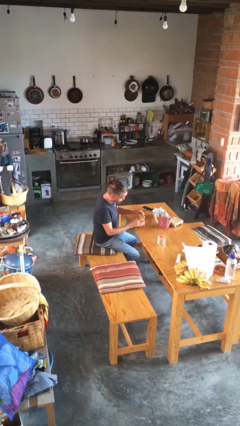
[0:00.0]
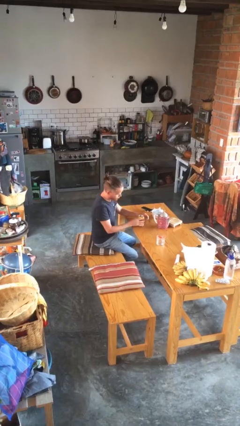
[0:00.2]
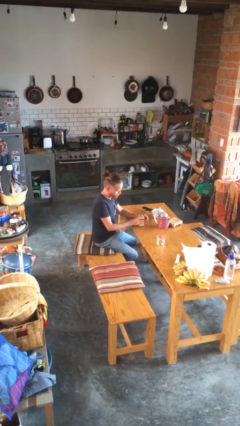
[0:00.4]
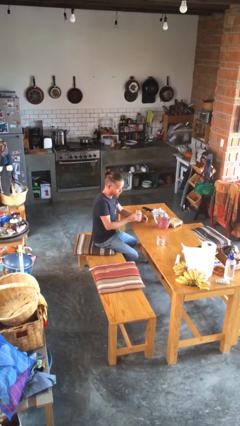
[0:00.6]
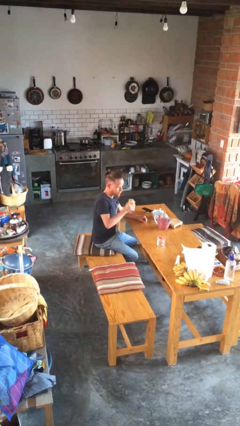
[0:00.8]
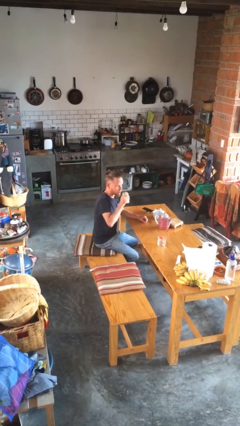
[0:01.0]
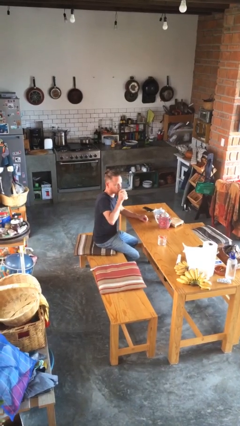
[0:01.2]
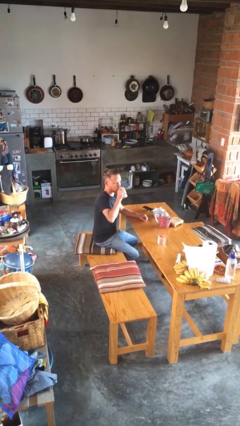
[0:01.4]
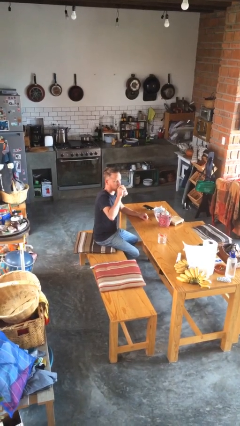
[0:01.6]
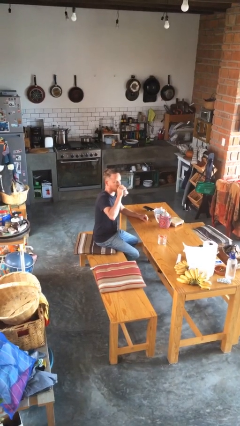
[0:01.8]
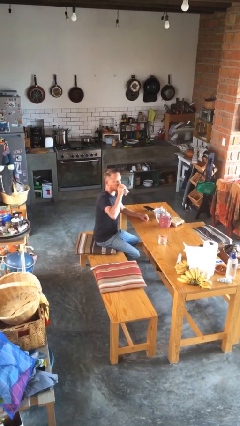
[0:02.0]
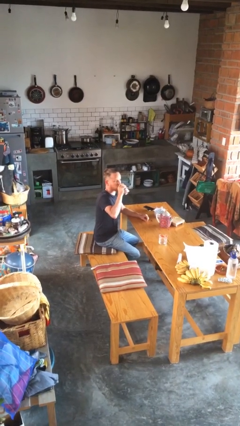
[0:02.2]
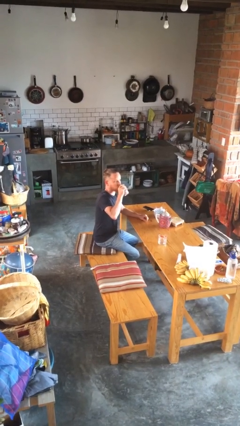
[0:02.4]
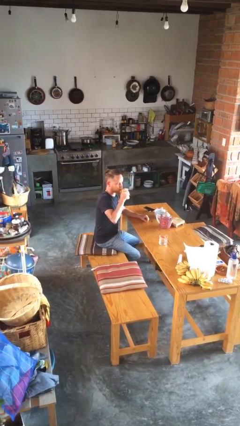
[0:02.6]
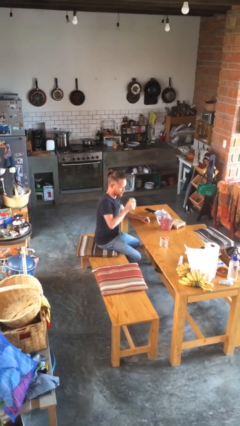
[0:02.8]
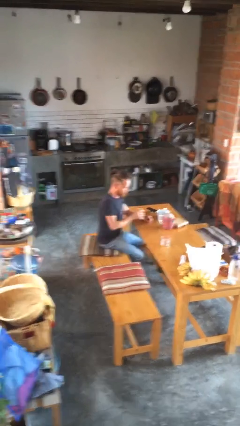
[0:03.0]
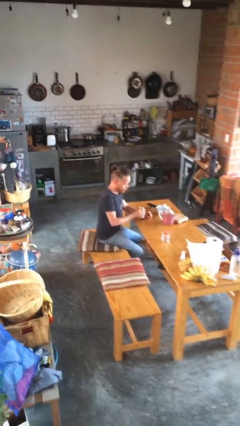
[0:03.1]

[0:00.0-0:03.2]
person drinks from beverage can

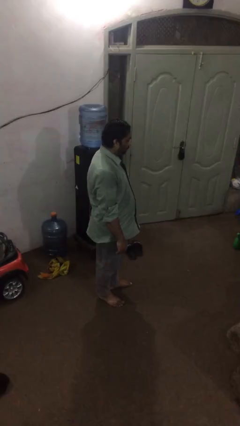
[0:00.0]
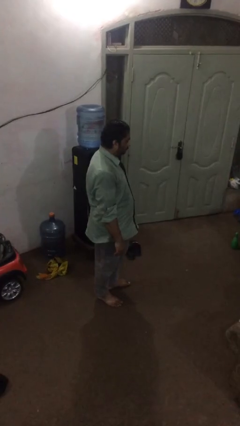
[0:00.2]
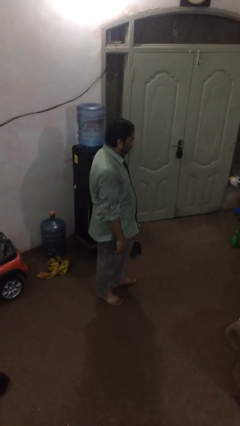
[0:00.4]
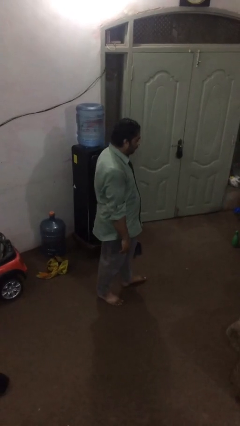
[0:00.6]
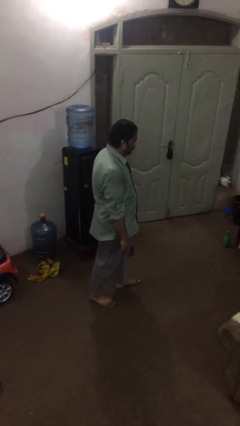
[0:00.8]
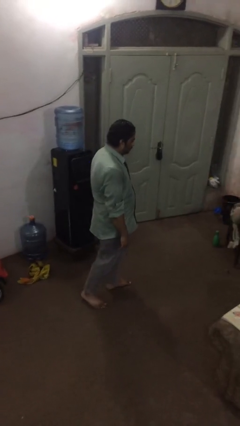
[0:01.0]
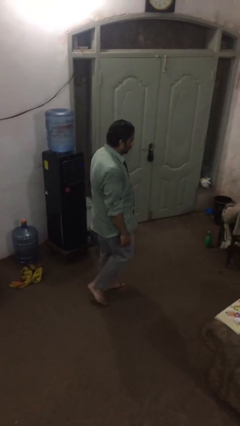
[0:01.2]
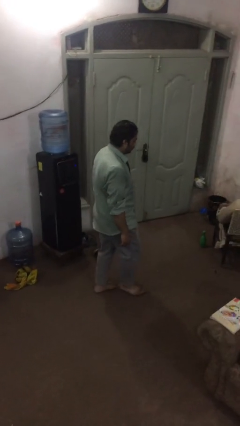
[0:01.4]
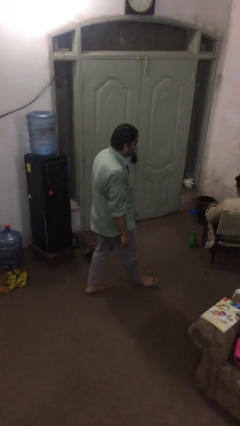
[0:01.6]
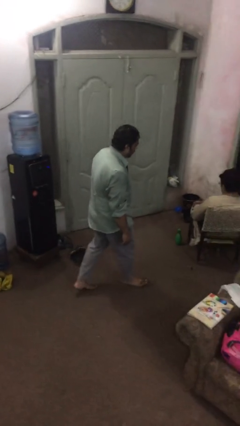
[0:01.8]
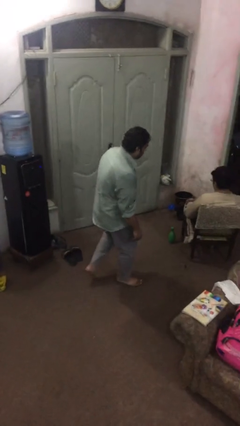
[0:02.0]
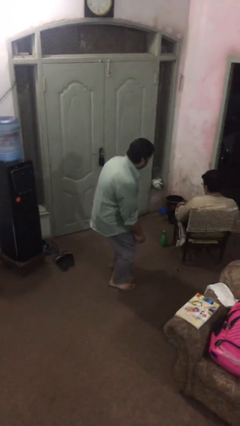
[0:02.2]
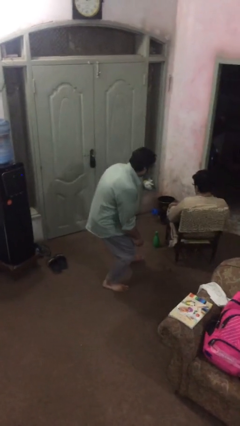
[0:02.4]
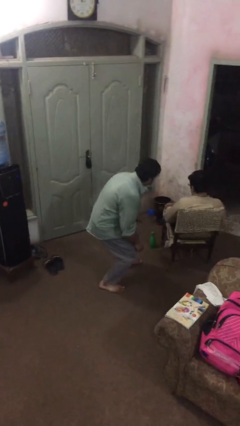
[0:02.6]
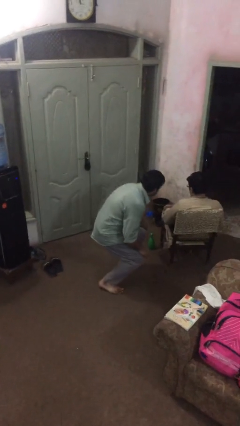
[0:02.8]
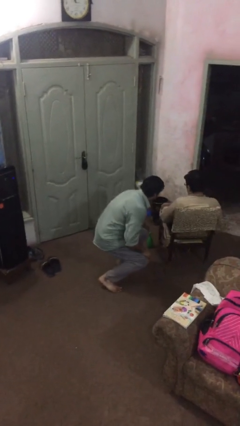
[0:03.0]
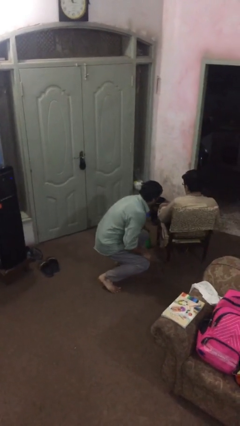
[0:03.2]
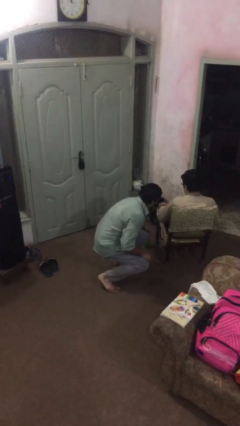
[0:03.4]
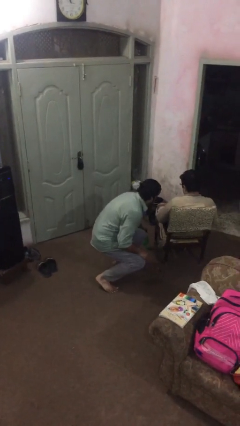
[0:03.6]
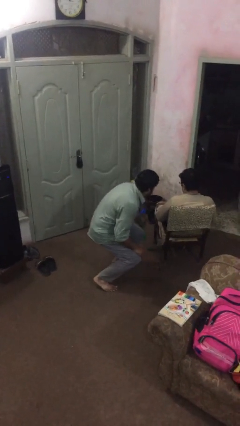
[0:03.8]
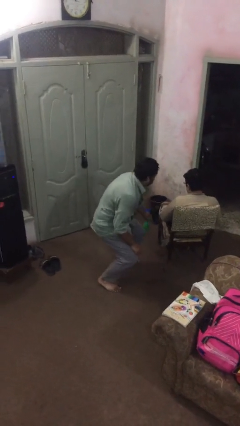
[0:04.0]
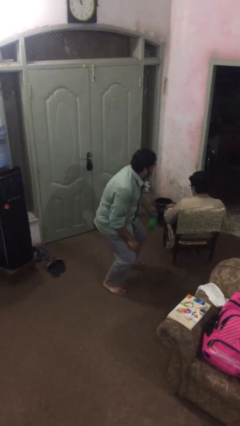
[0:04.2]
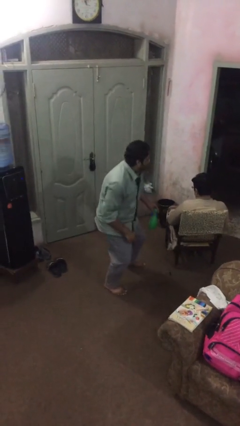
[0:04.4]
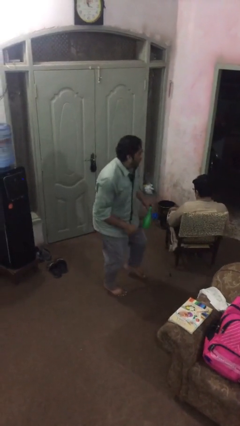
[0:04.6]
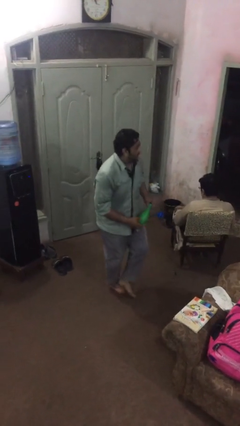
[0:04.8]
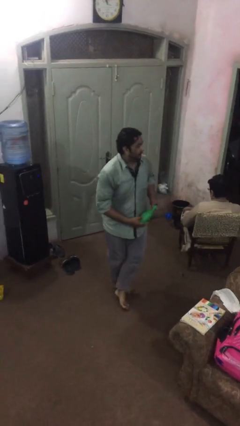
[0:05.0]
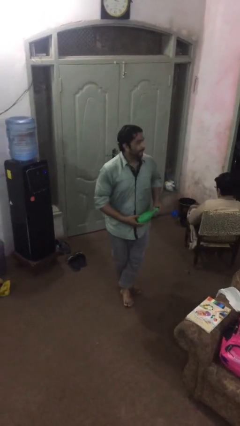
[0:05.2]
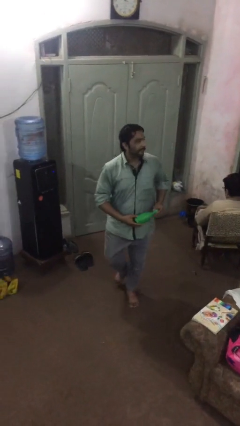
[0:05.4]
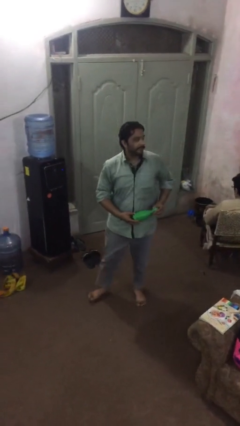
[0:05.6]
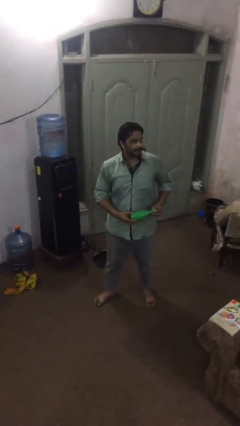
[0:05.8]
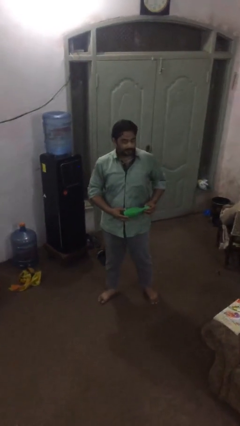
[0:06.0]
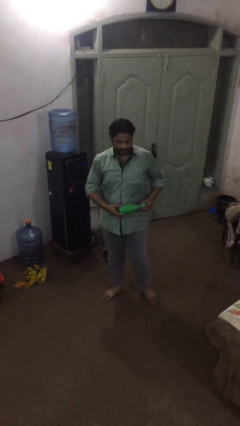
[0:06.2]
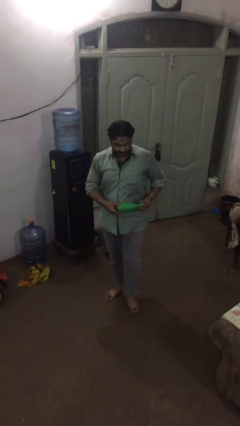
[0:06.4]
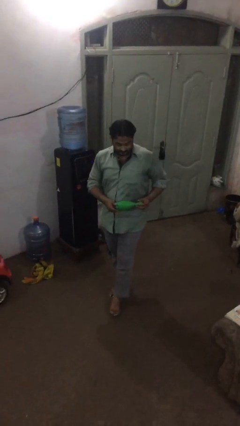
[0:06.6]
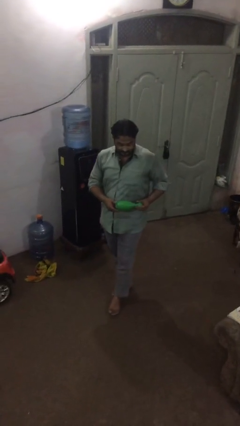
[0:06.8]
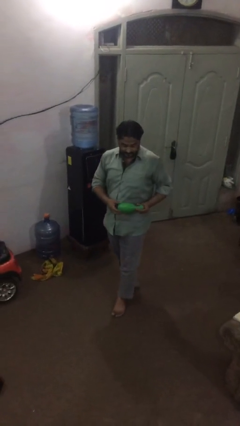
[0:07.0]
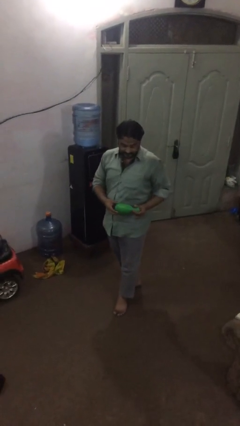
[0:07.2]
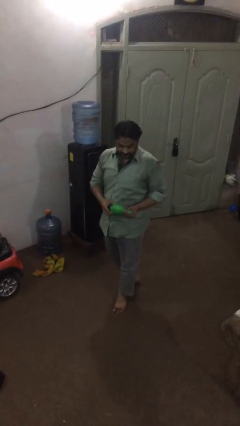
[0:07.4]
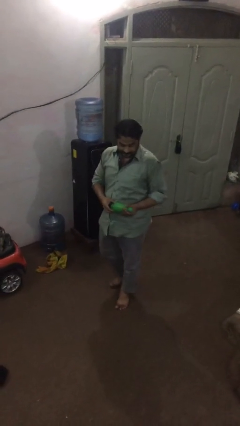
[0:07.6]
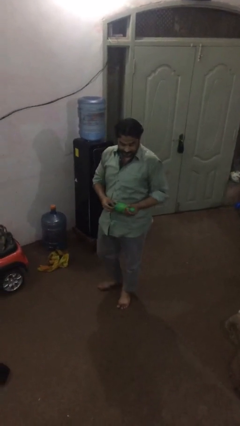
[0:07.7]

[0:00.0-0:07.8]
person steals object from person

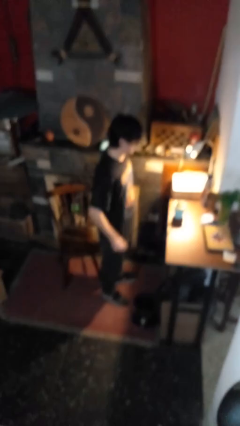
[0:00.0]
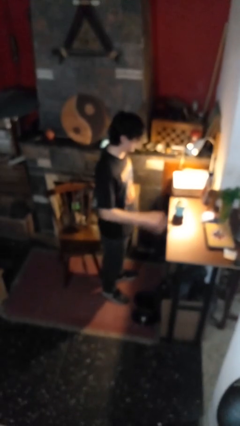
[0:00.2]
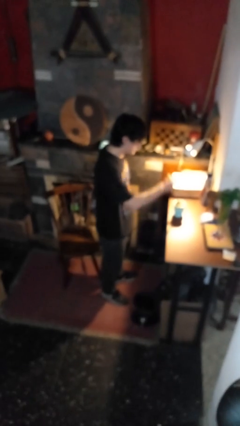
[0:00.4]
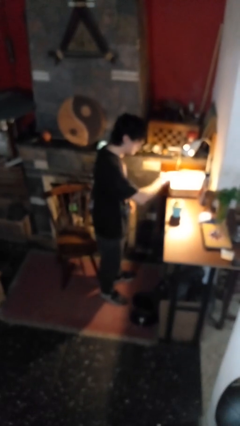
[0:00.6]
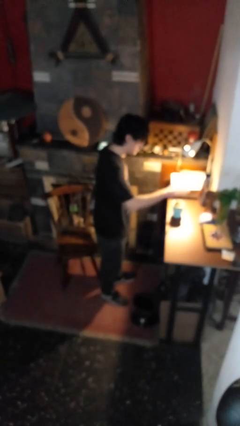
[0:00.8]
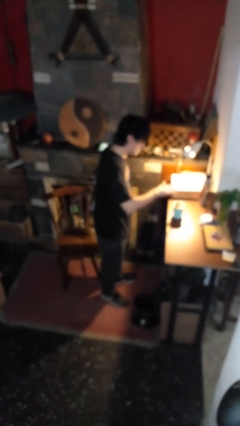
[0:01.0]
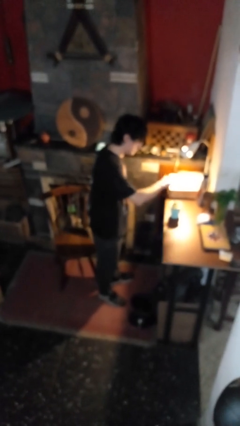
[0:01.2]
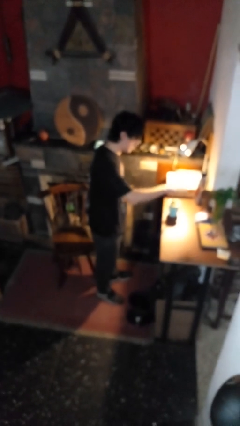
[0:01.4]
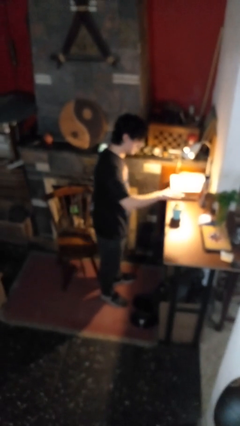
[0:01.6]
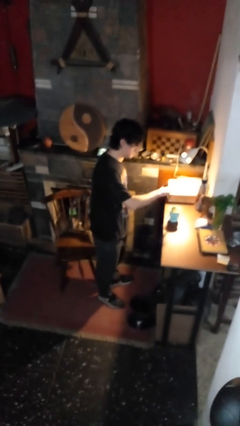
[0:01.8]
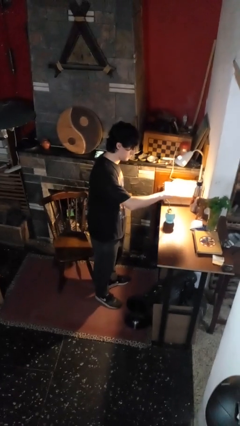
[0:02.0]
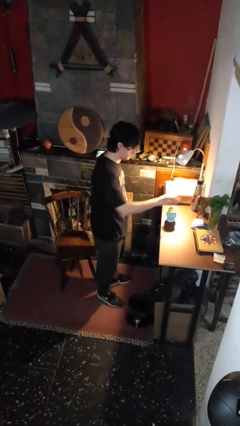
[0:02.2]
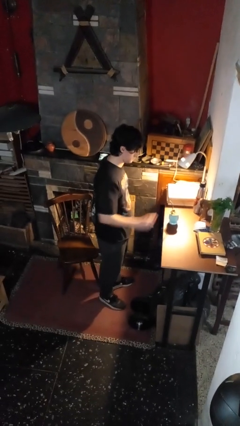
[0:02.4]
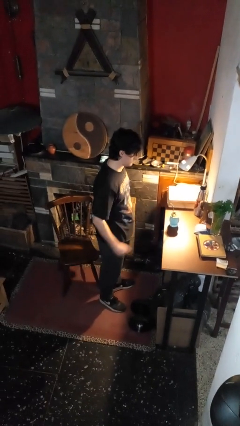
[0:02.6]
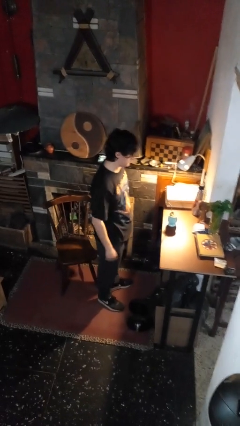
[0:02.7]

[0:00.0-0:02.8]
person waves hand over object

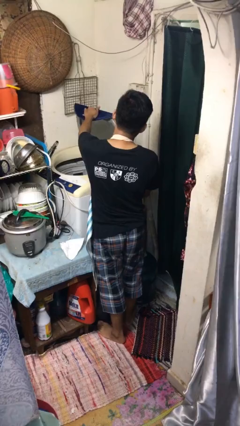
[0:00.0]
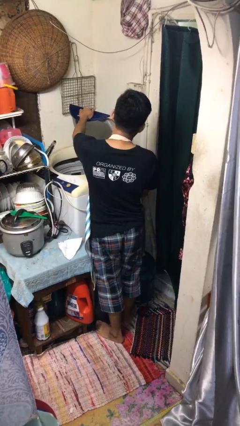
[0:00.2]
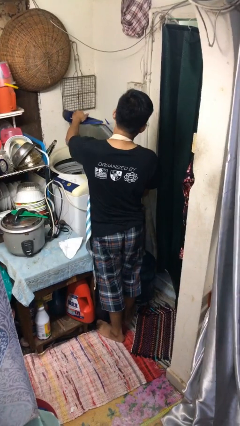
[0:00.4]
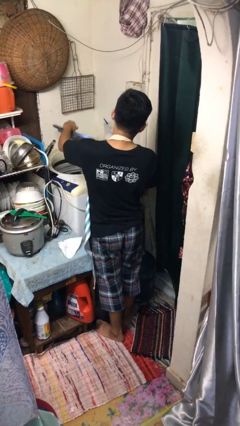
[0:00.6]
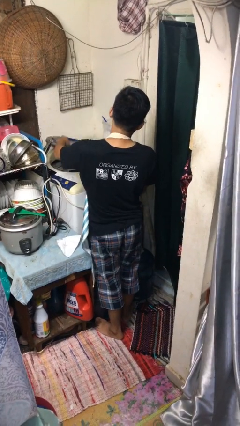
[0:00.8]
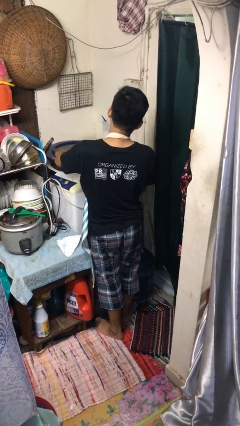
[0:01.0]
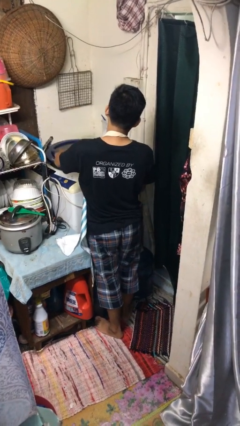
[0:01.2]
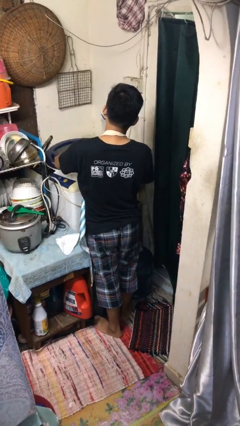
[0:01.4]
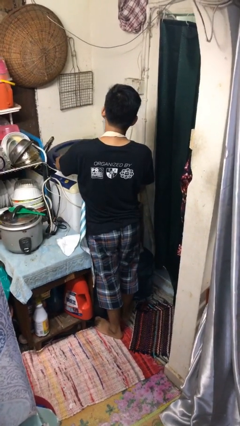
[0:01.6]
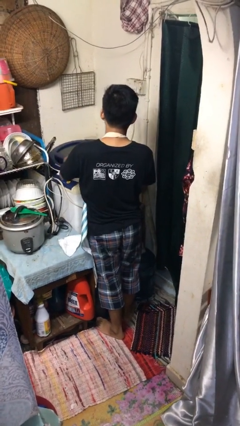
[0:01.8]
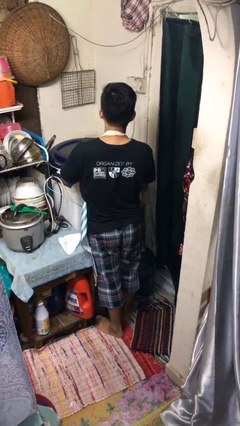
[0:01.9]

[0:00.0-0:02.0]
person closes clothes washer

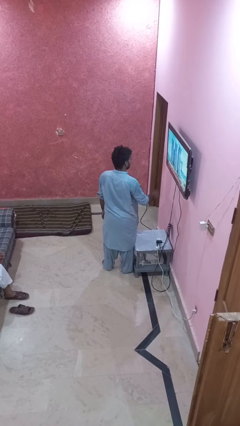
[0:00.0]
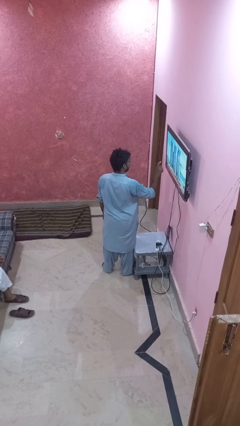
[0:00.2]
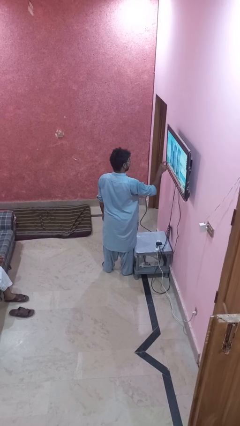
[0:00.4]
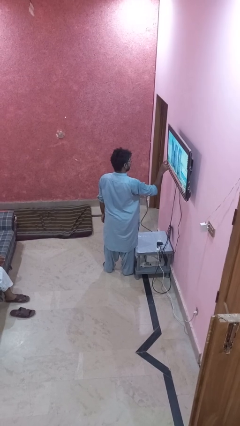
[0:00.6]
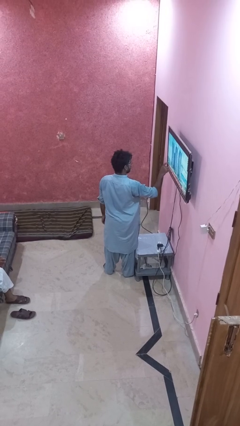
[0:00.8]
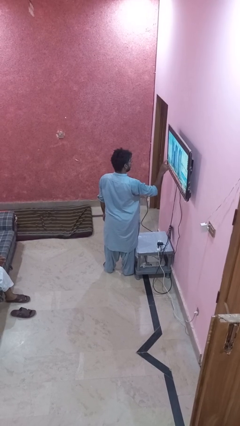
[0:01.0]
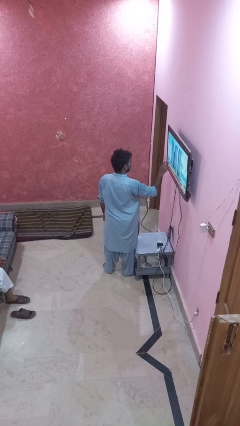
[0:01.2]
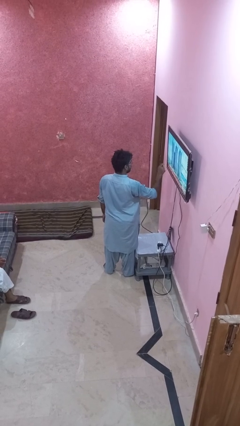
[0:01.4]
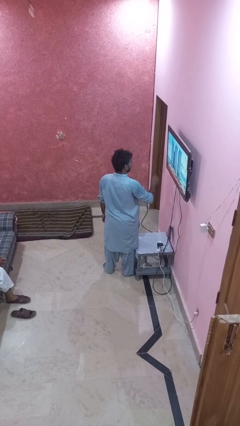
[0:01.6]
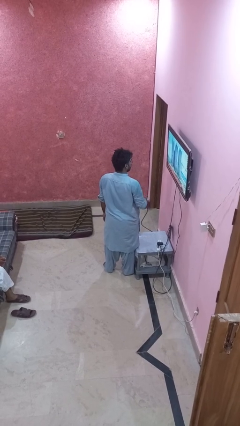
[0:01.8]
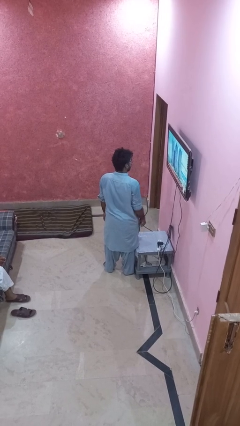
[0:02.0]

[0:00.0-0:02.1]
person taps object with finger
